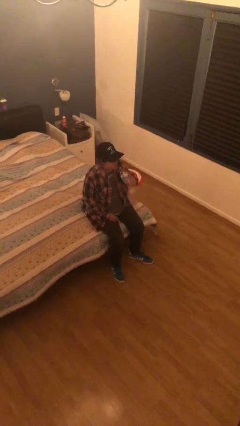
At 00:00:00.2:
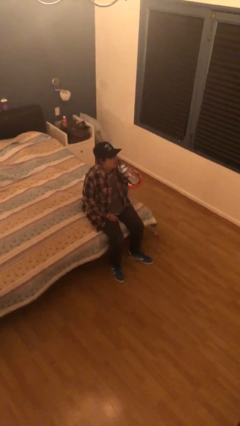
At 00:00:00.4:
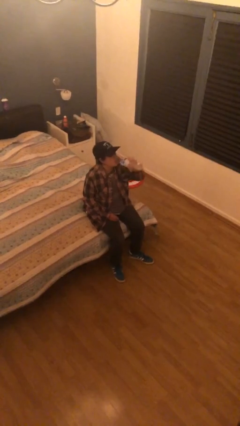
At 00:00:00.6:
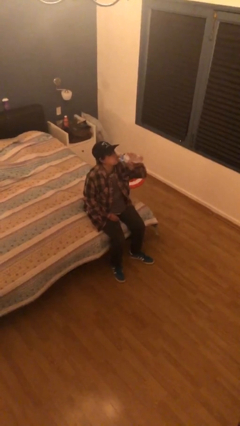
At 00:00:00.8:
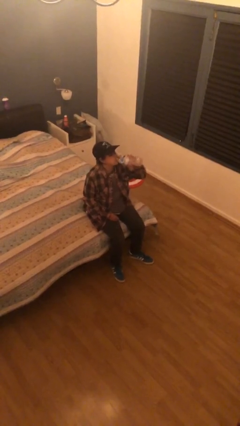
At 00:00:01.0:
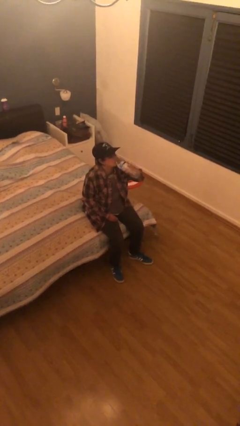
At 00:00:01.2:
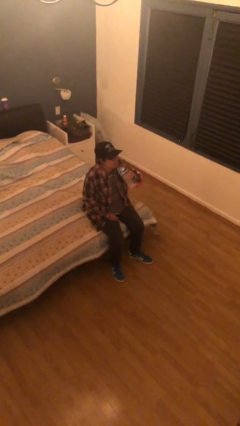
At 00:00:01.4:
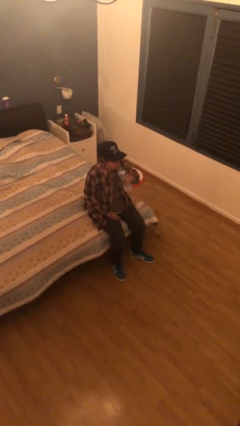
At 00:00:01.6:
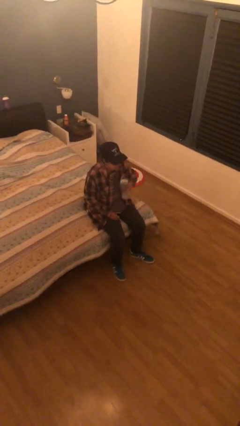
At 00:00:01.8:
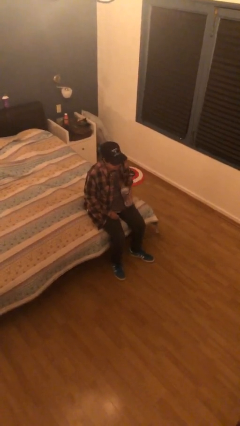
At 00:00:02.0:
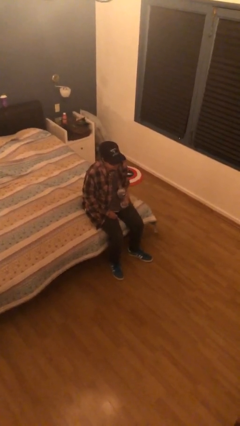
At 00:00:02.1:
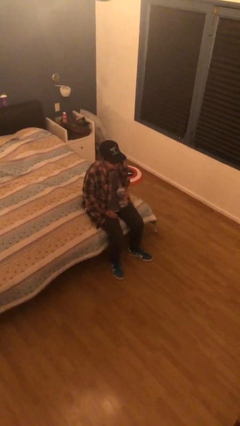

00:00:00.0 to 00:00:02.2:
person drinks from bottle

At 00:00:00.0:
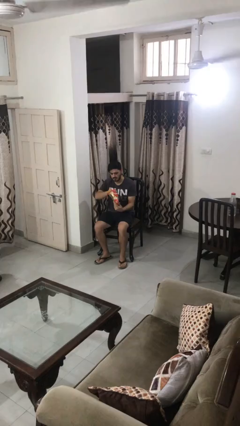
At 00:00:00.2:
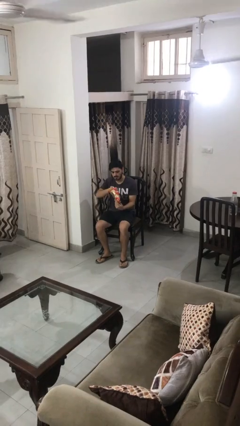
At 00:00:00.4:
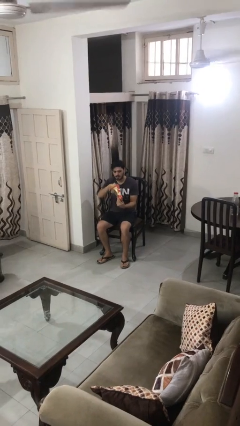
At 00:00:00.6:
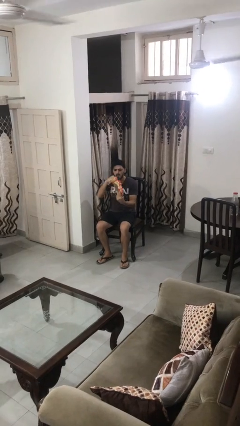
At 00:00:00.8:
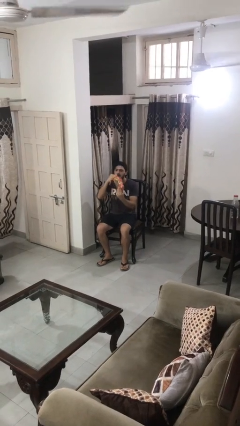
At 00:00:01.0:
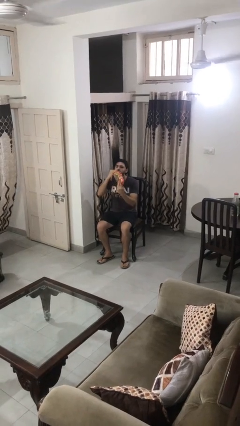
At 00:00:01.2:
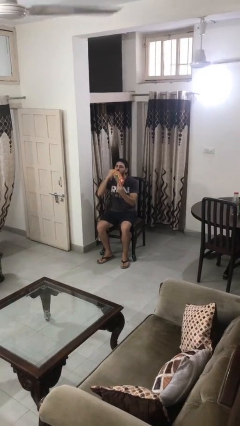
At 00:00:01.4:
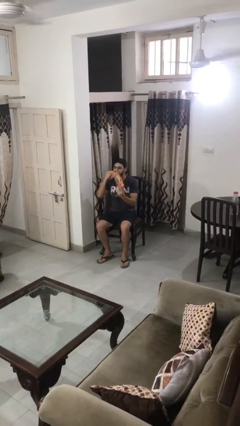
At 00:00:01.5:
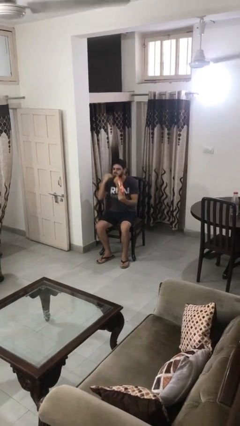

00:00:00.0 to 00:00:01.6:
person eats snack from bag

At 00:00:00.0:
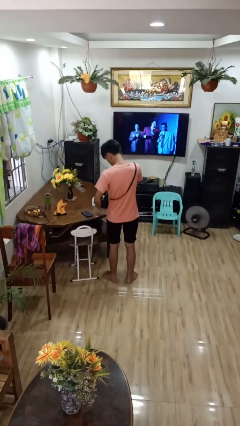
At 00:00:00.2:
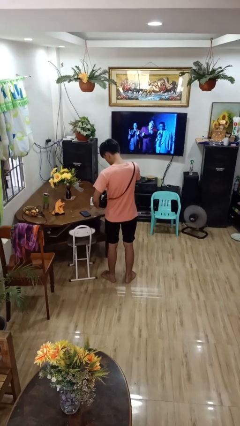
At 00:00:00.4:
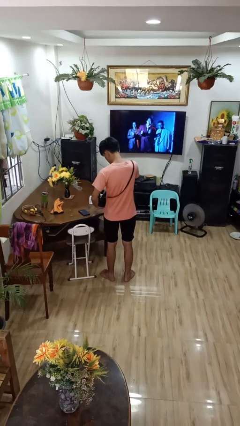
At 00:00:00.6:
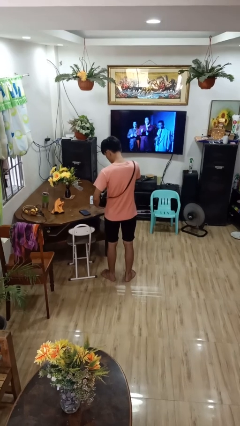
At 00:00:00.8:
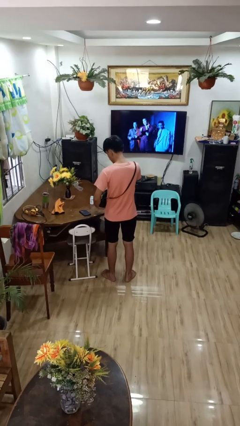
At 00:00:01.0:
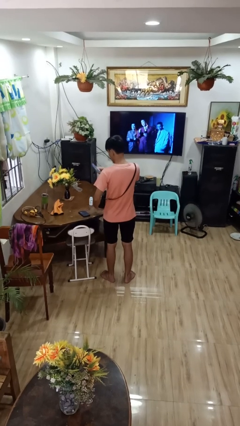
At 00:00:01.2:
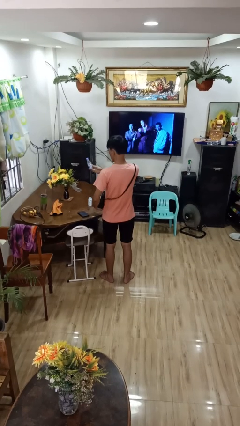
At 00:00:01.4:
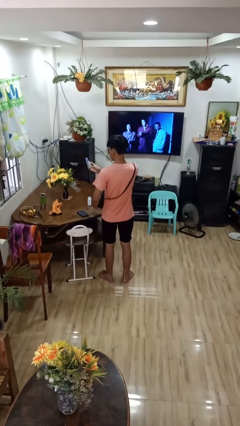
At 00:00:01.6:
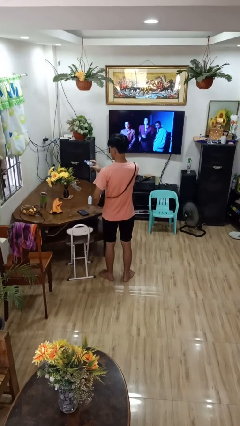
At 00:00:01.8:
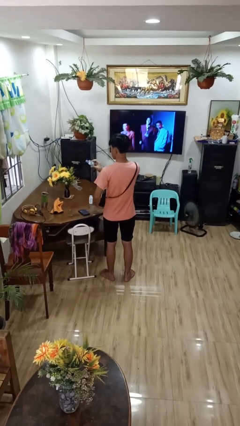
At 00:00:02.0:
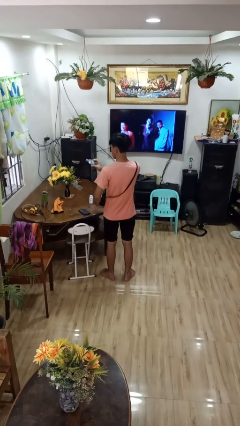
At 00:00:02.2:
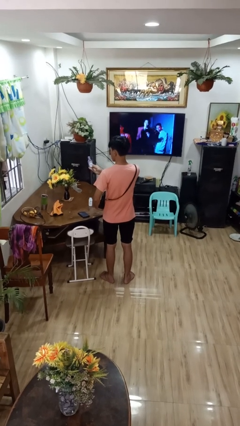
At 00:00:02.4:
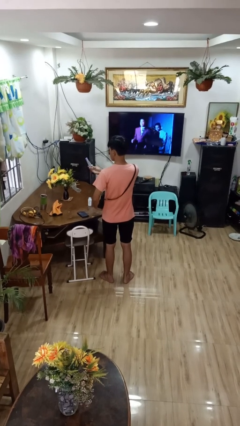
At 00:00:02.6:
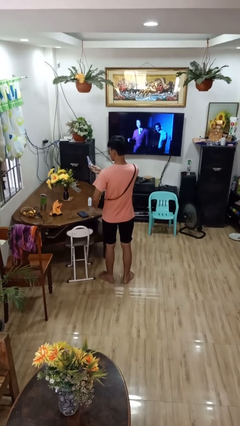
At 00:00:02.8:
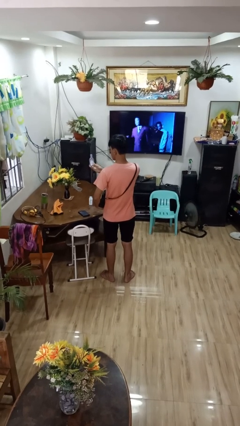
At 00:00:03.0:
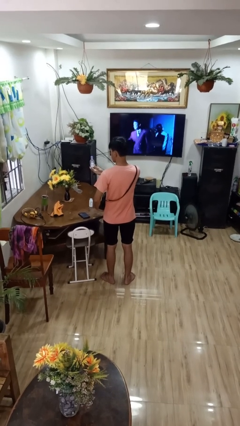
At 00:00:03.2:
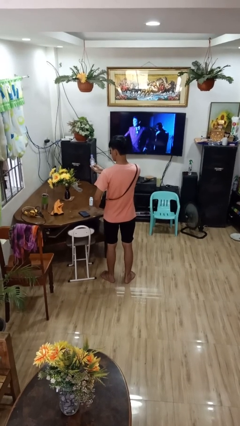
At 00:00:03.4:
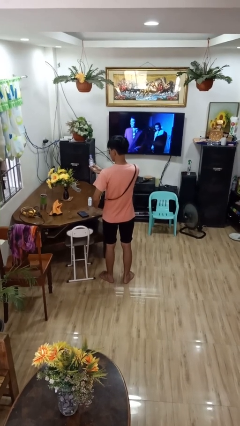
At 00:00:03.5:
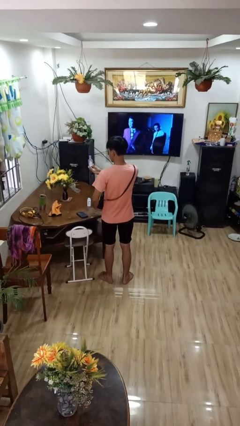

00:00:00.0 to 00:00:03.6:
person takes object from purse

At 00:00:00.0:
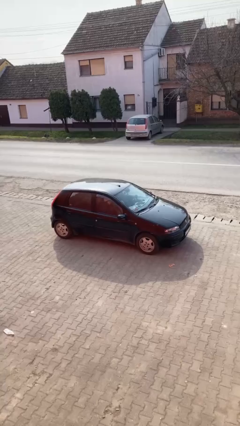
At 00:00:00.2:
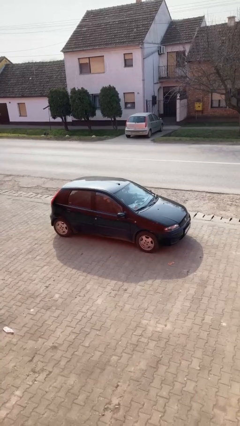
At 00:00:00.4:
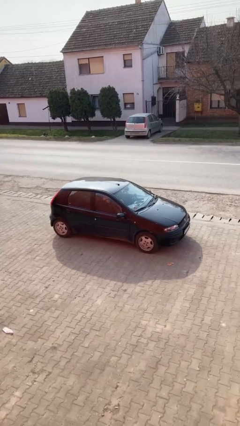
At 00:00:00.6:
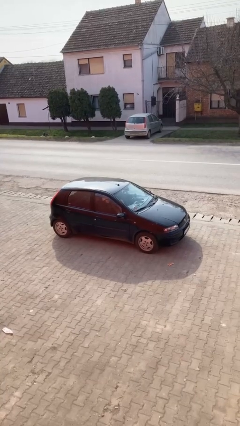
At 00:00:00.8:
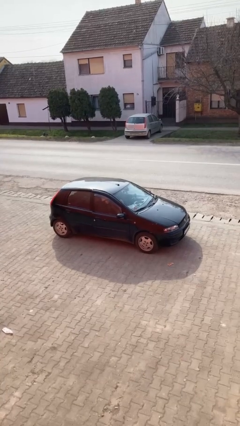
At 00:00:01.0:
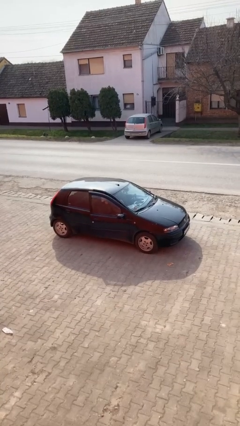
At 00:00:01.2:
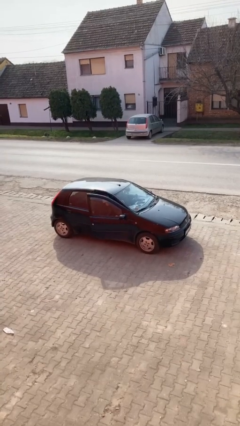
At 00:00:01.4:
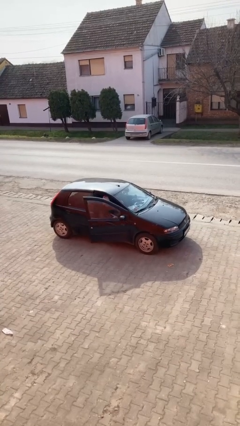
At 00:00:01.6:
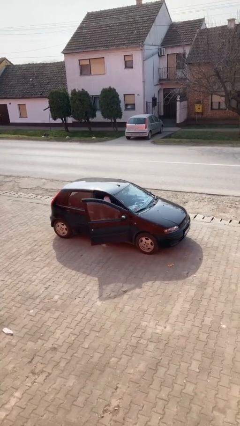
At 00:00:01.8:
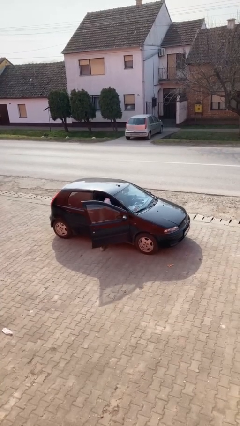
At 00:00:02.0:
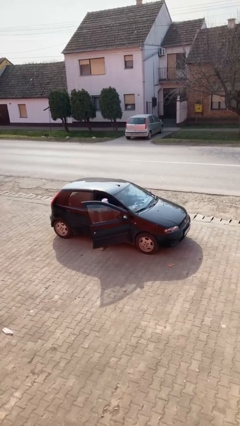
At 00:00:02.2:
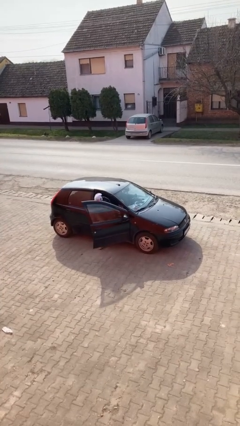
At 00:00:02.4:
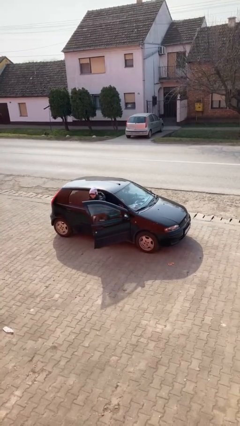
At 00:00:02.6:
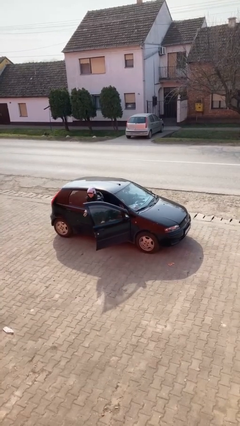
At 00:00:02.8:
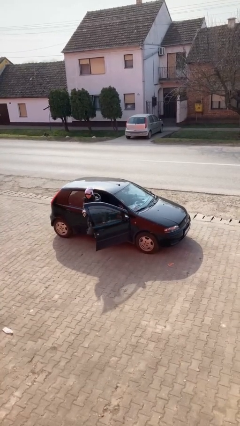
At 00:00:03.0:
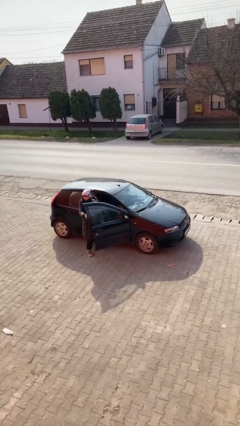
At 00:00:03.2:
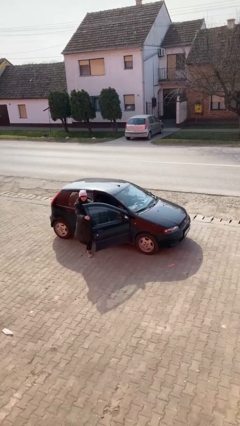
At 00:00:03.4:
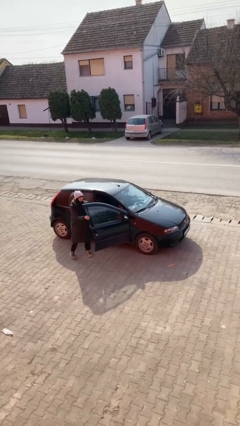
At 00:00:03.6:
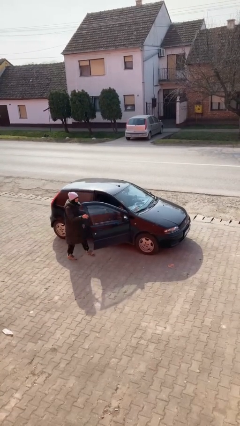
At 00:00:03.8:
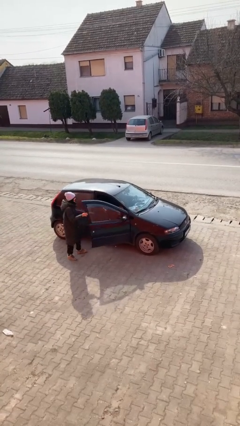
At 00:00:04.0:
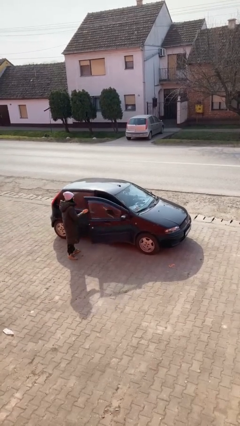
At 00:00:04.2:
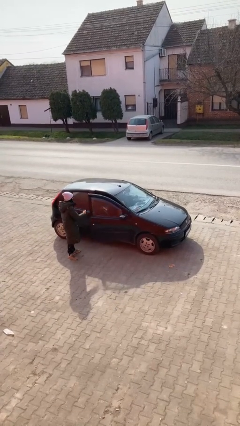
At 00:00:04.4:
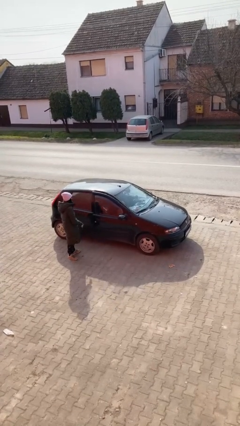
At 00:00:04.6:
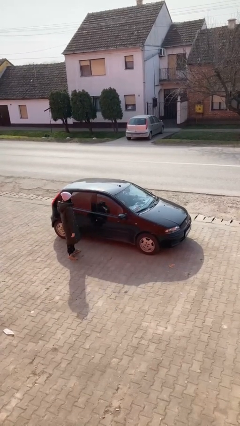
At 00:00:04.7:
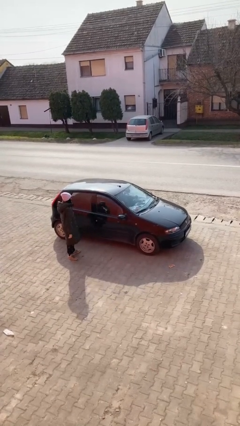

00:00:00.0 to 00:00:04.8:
car drops off person

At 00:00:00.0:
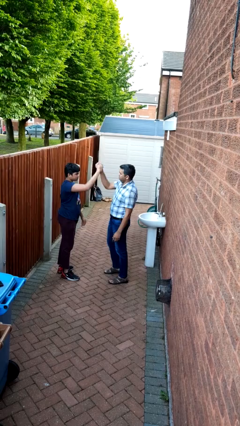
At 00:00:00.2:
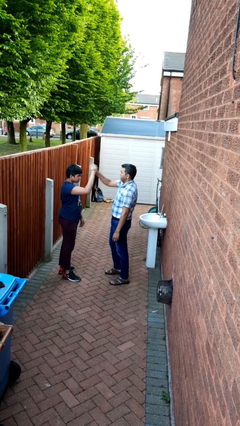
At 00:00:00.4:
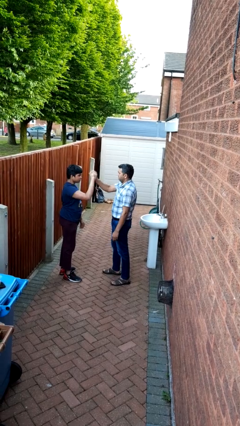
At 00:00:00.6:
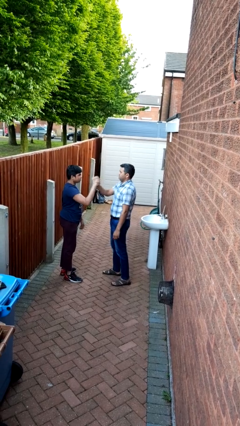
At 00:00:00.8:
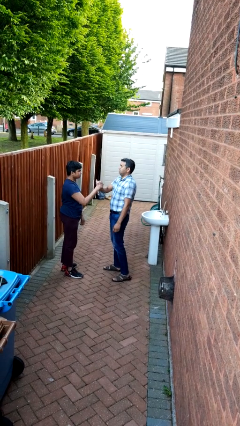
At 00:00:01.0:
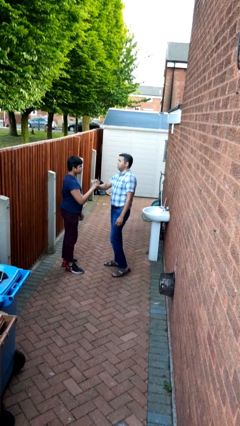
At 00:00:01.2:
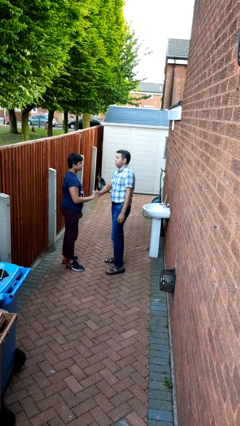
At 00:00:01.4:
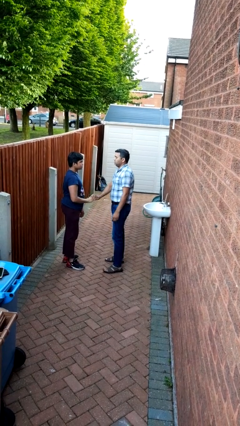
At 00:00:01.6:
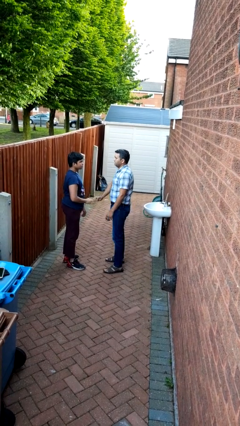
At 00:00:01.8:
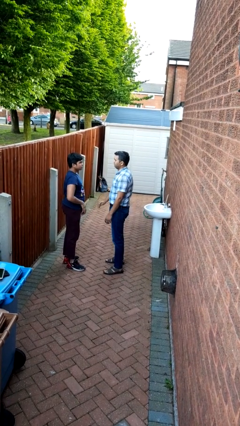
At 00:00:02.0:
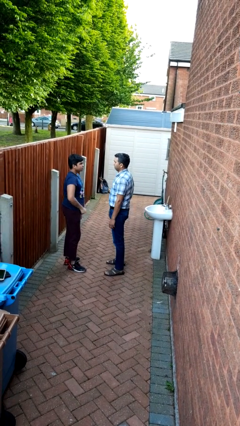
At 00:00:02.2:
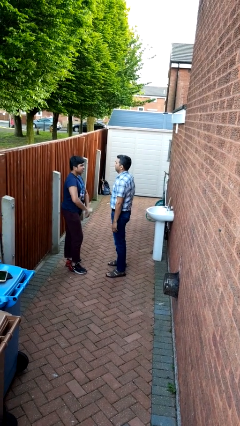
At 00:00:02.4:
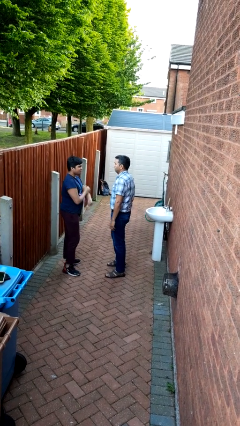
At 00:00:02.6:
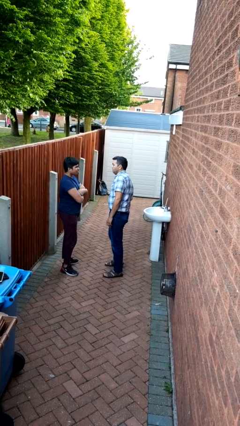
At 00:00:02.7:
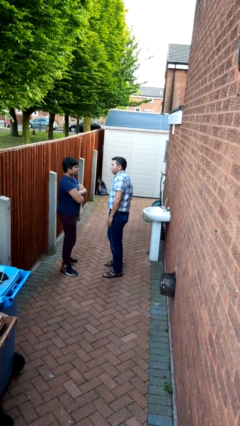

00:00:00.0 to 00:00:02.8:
person highfives hand

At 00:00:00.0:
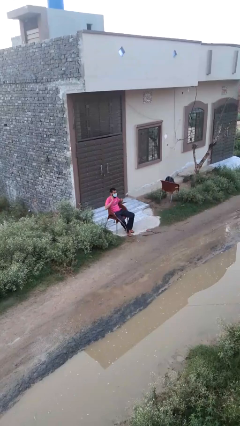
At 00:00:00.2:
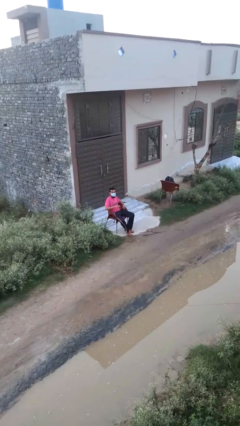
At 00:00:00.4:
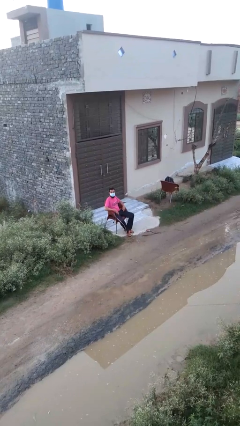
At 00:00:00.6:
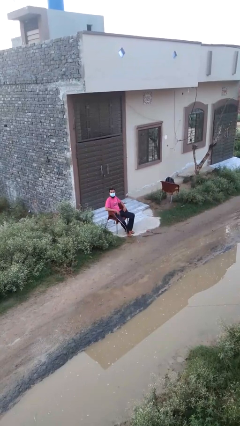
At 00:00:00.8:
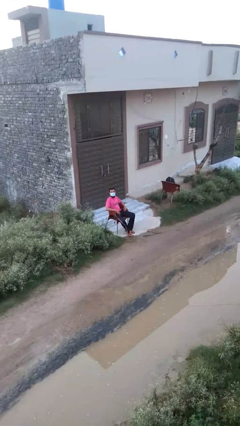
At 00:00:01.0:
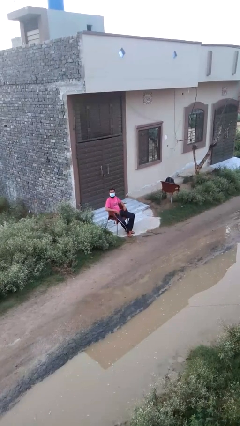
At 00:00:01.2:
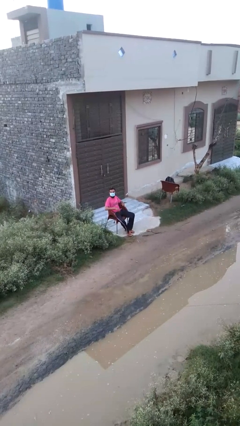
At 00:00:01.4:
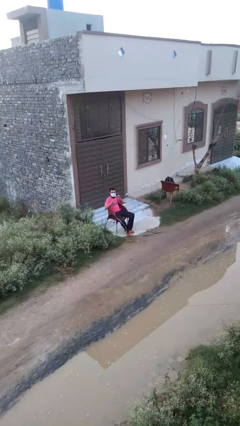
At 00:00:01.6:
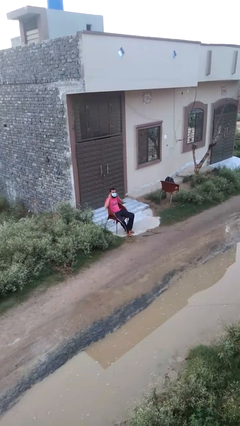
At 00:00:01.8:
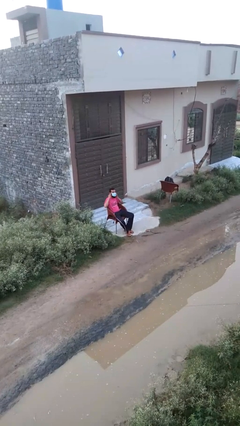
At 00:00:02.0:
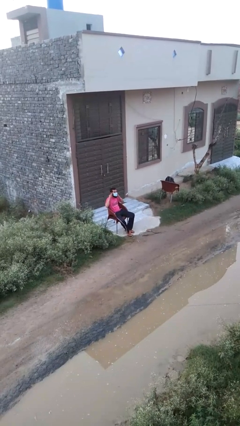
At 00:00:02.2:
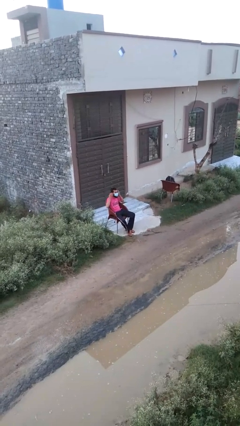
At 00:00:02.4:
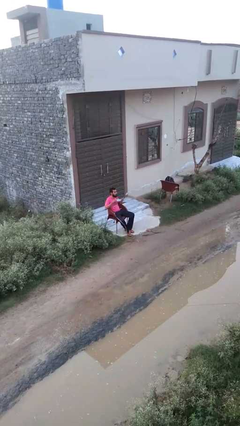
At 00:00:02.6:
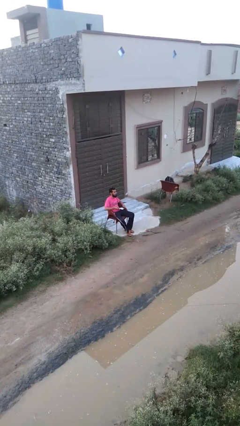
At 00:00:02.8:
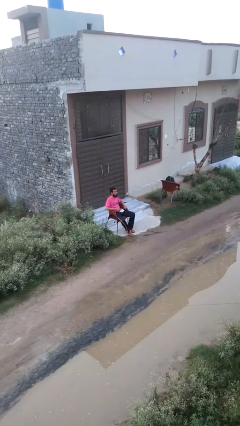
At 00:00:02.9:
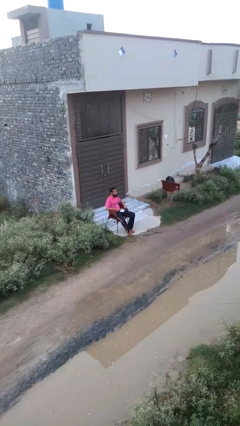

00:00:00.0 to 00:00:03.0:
person takes off facemask
